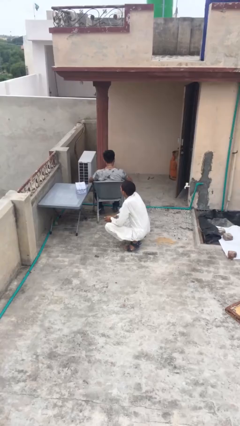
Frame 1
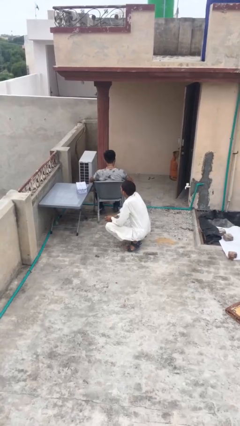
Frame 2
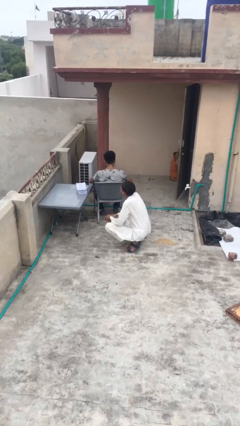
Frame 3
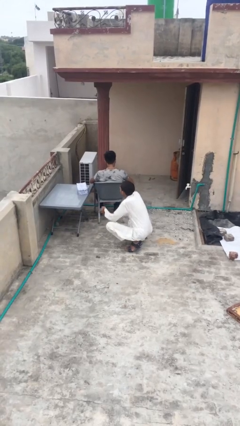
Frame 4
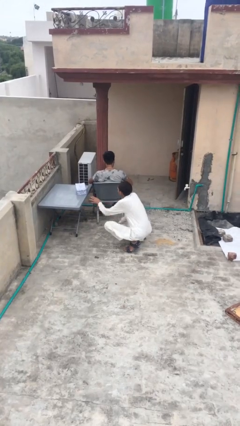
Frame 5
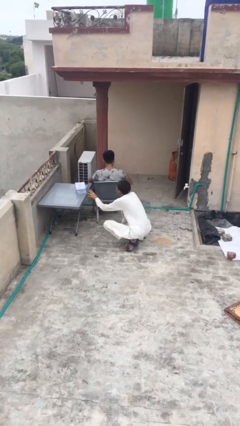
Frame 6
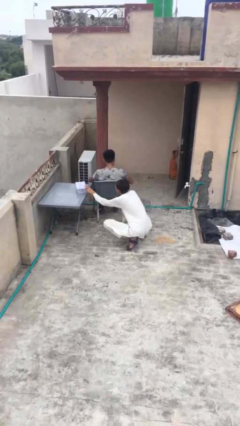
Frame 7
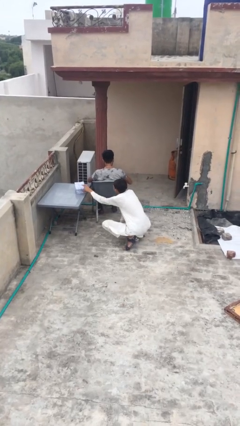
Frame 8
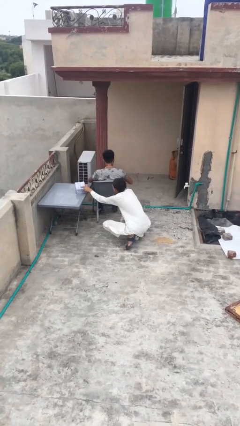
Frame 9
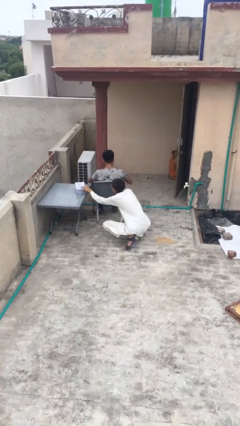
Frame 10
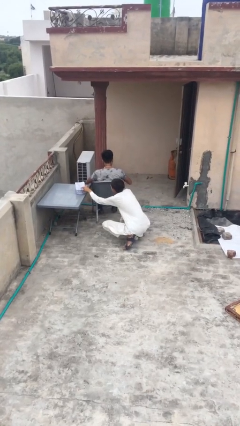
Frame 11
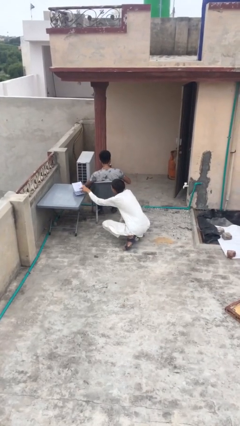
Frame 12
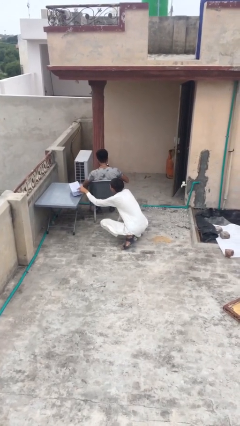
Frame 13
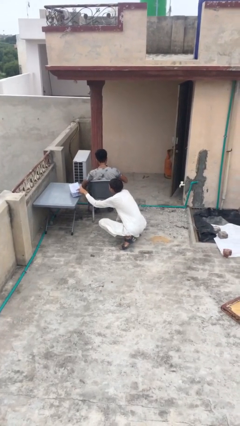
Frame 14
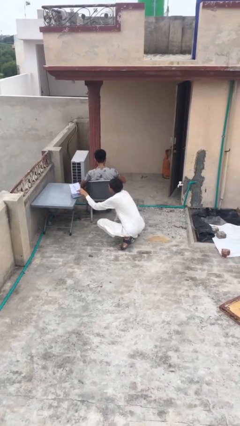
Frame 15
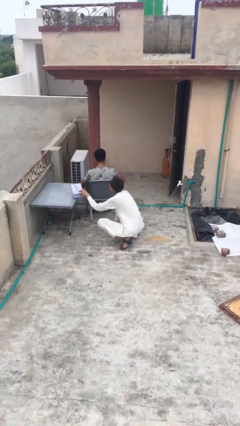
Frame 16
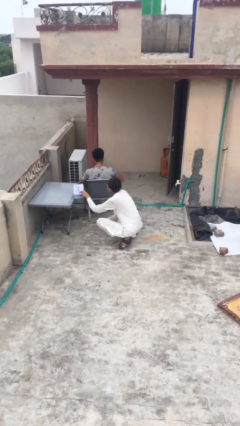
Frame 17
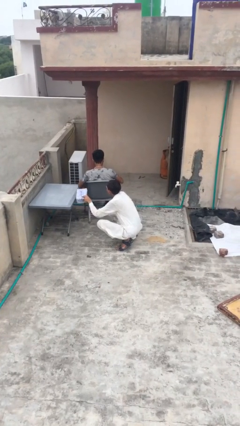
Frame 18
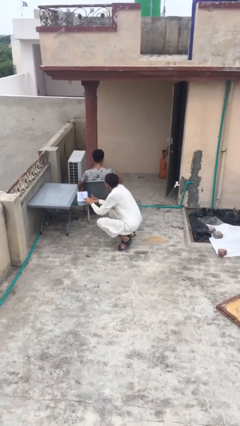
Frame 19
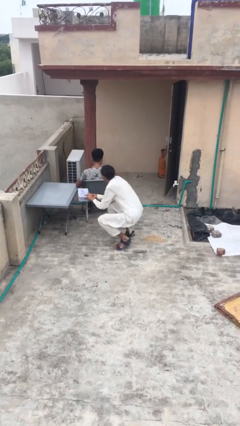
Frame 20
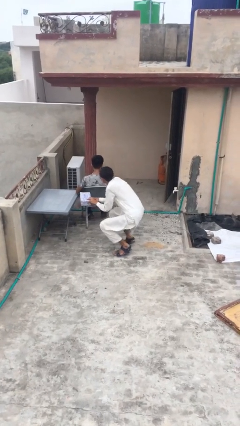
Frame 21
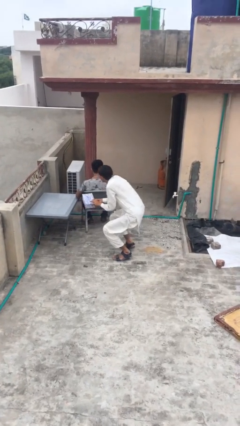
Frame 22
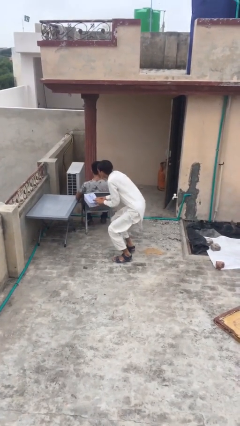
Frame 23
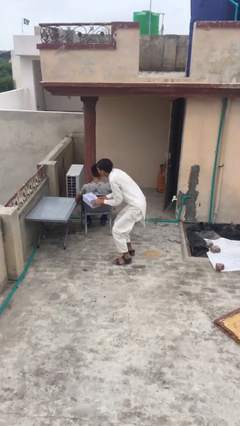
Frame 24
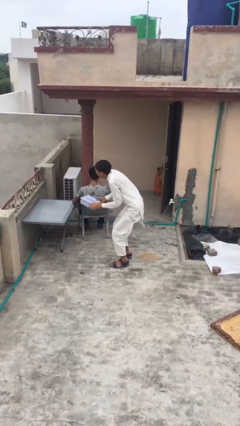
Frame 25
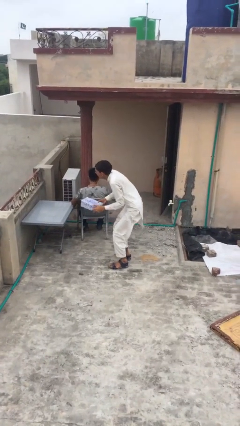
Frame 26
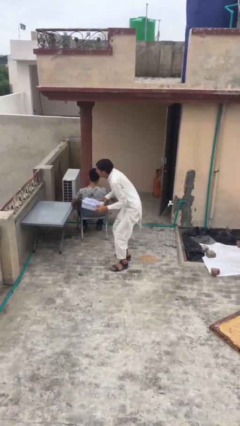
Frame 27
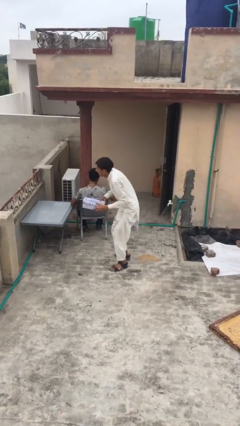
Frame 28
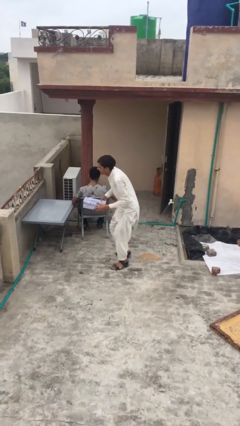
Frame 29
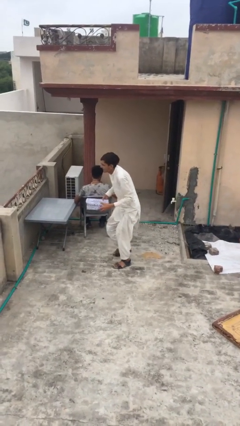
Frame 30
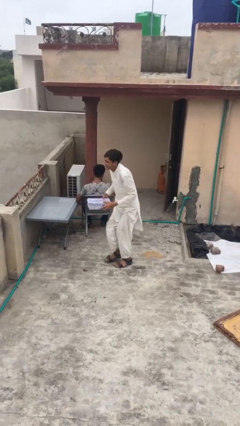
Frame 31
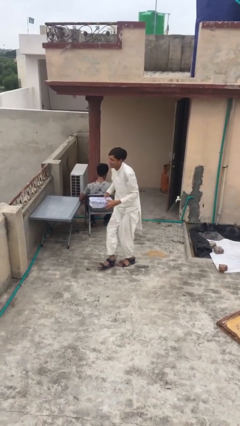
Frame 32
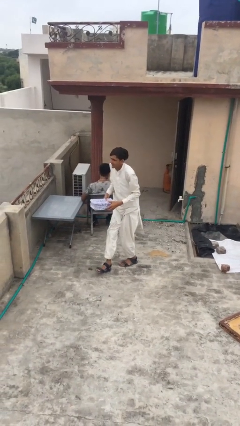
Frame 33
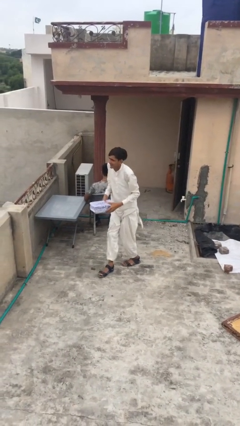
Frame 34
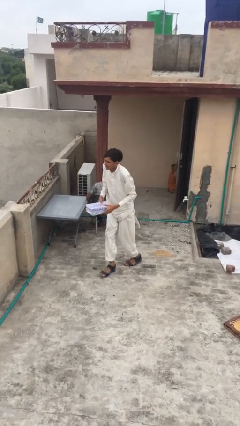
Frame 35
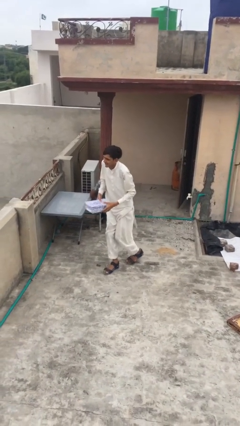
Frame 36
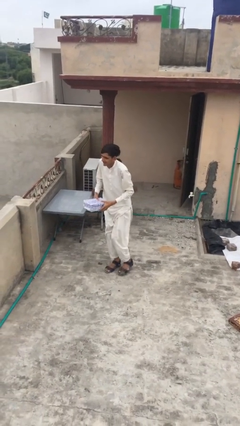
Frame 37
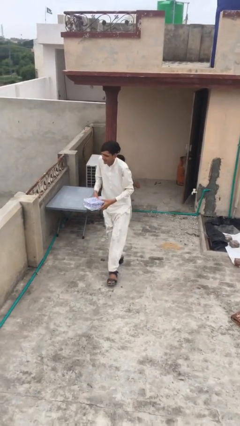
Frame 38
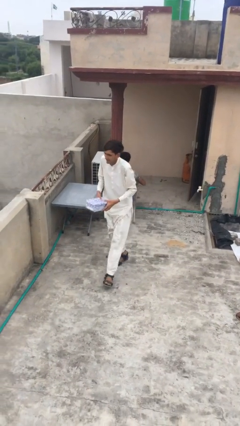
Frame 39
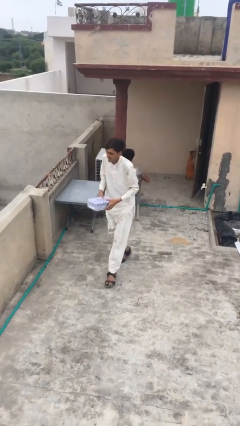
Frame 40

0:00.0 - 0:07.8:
person steals object from person

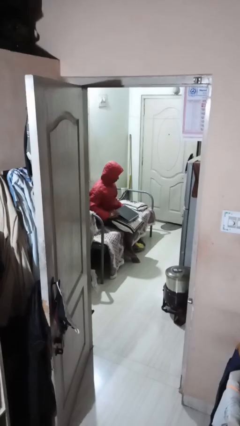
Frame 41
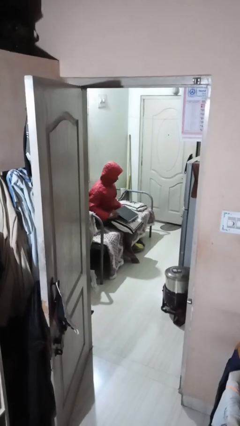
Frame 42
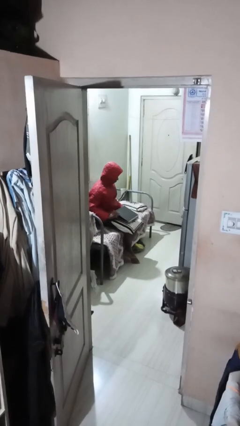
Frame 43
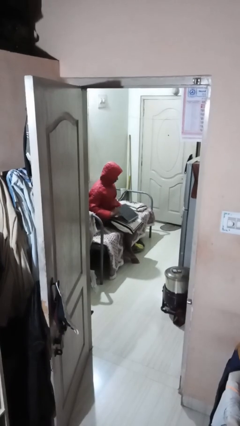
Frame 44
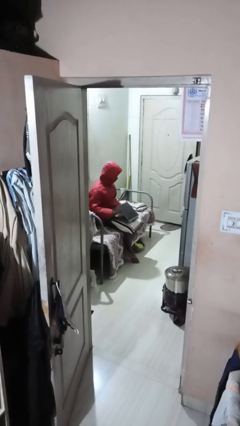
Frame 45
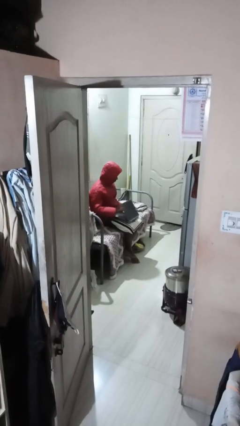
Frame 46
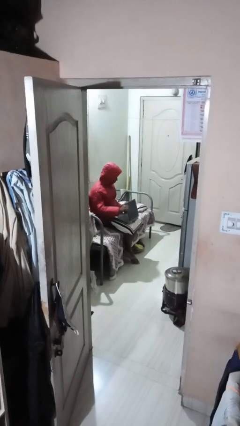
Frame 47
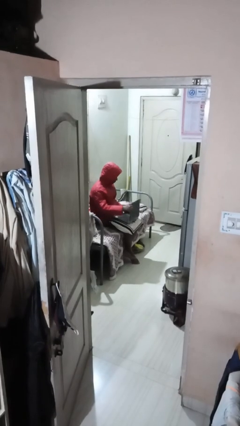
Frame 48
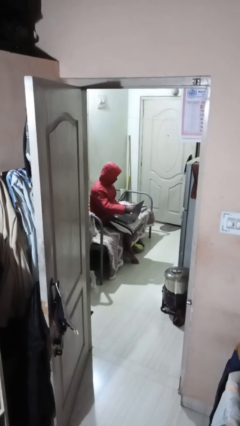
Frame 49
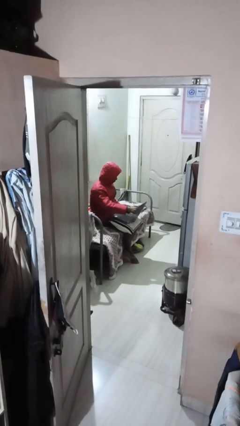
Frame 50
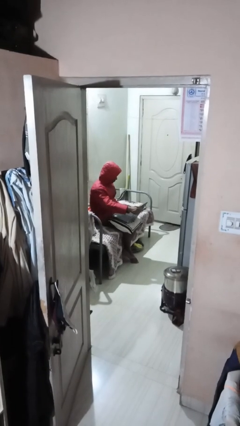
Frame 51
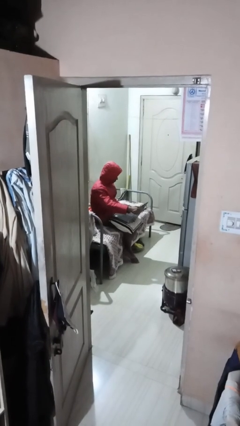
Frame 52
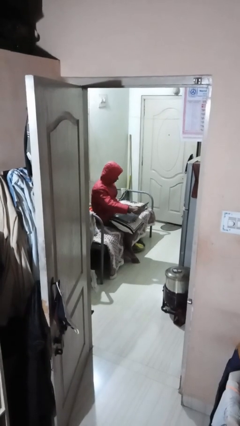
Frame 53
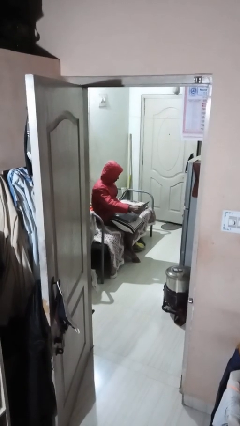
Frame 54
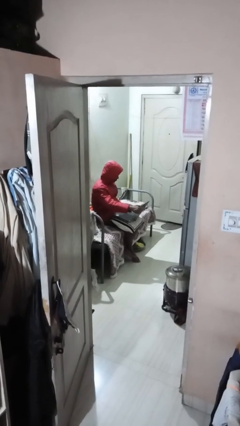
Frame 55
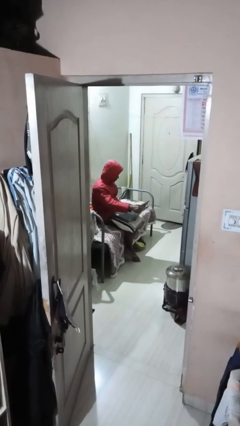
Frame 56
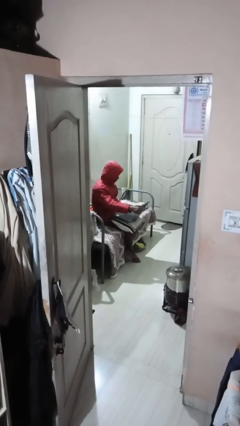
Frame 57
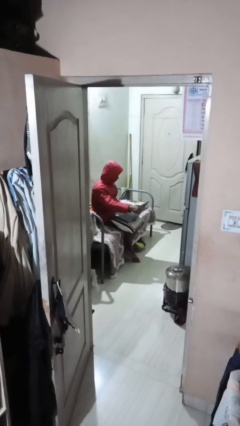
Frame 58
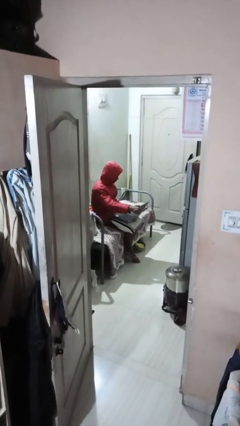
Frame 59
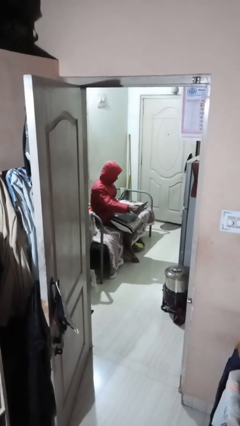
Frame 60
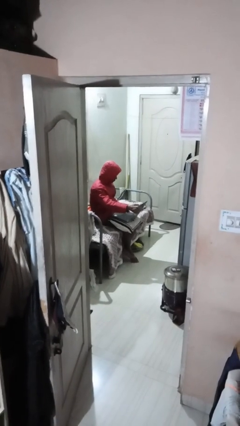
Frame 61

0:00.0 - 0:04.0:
person interacts with laptop

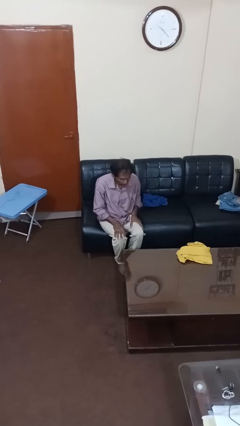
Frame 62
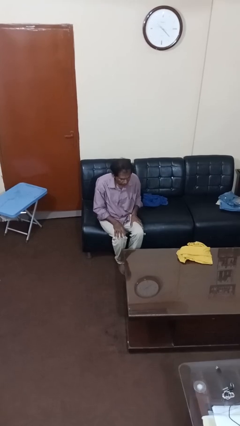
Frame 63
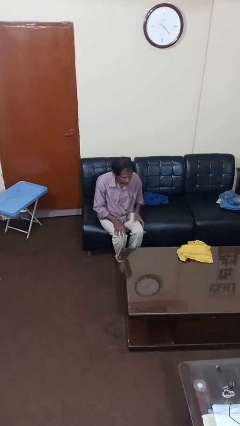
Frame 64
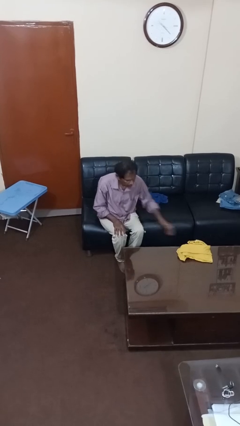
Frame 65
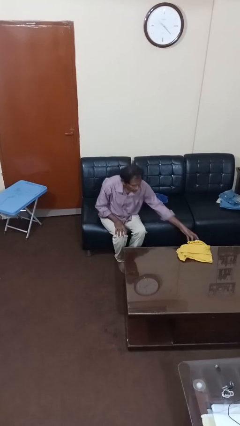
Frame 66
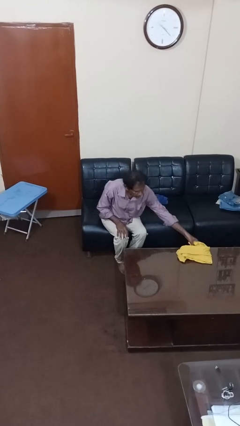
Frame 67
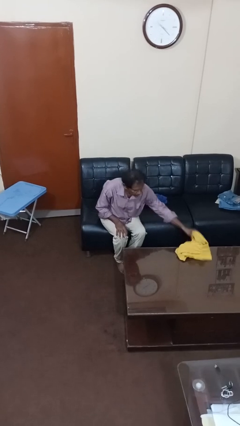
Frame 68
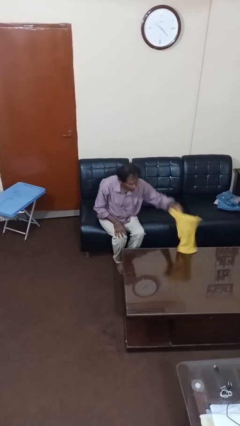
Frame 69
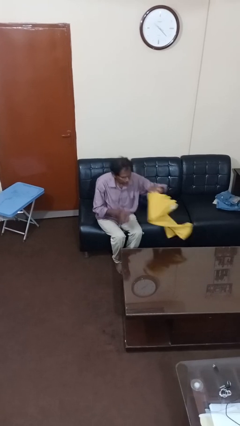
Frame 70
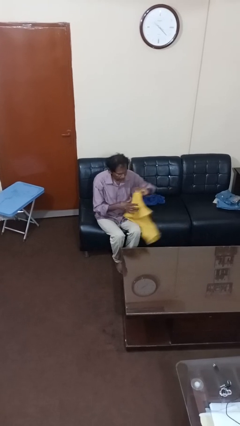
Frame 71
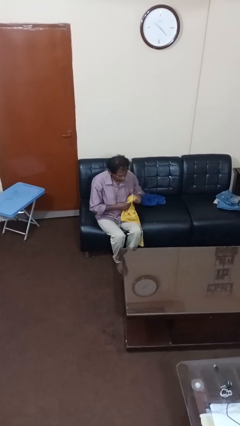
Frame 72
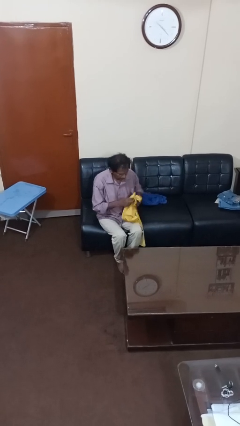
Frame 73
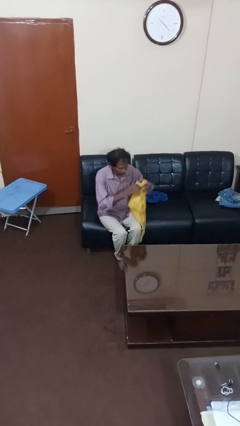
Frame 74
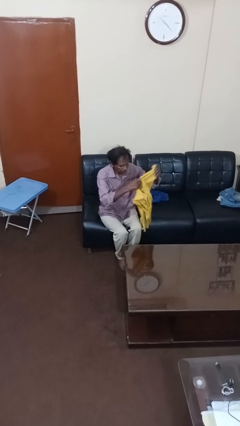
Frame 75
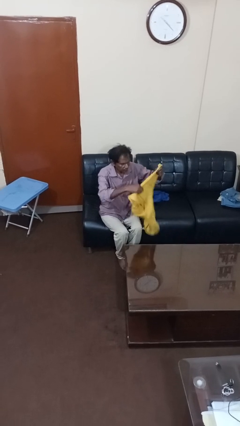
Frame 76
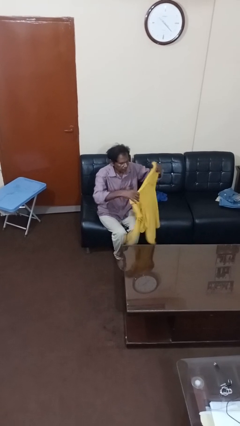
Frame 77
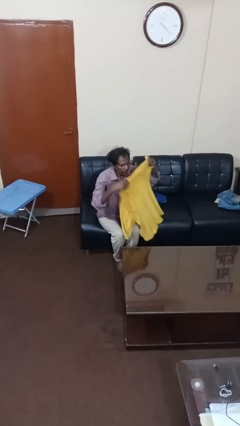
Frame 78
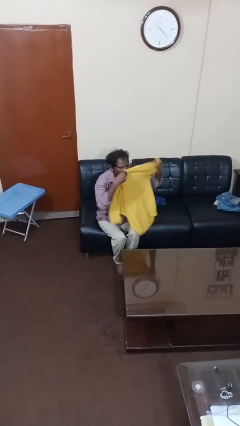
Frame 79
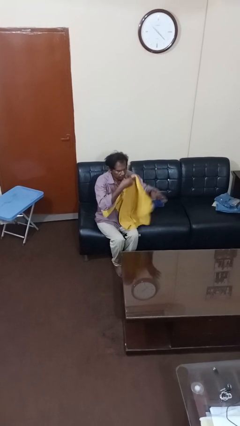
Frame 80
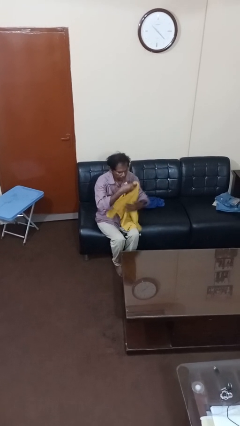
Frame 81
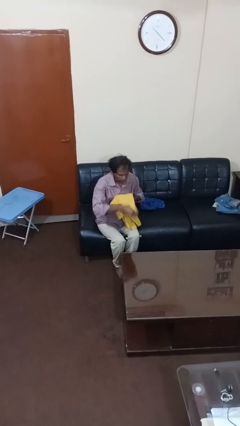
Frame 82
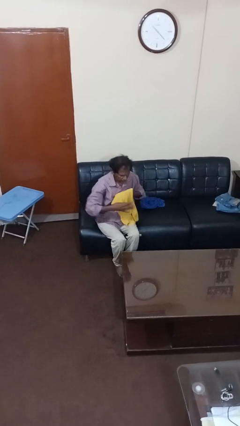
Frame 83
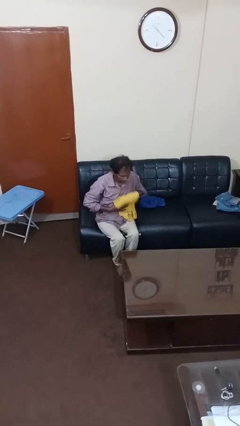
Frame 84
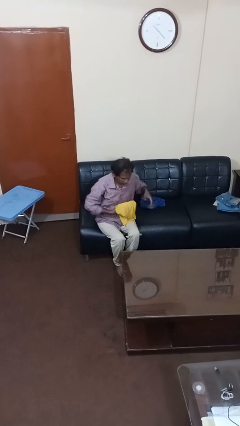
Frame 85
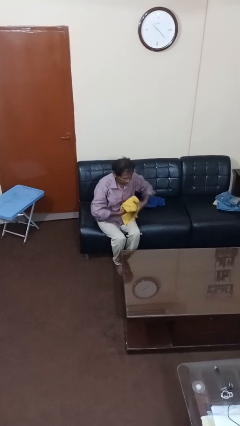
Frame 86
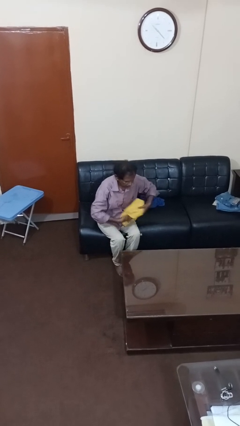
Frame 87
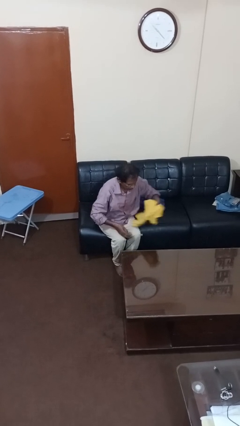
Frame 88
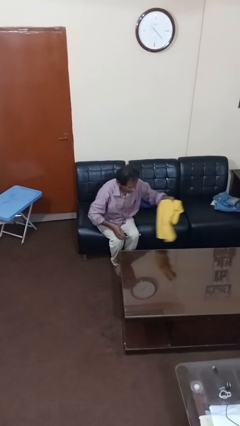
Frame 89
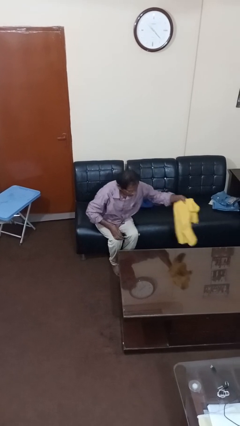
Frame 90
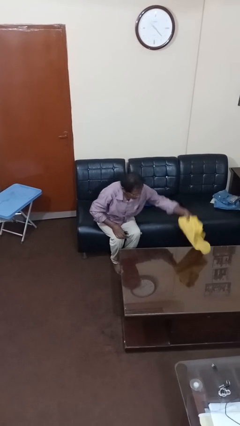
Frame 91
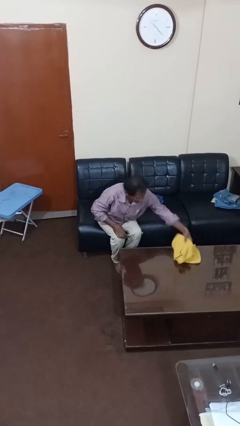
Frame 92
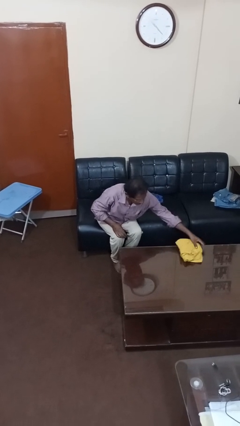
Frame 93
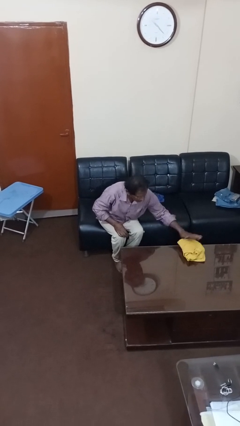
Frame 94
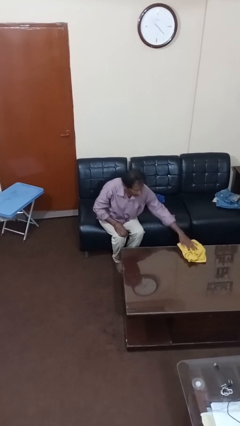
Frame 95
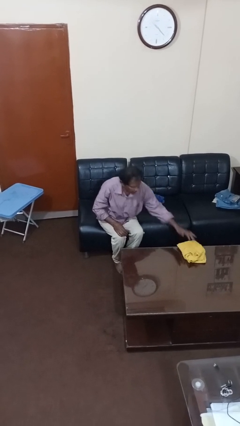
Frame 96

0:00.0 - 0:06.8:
person folds shirt
